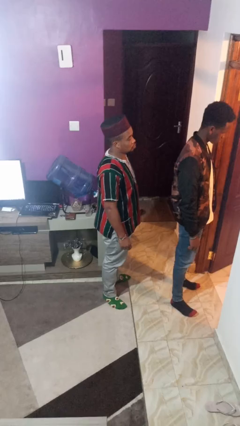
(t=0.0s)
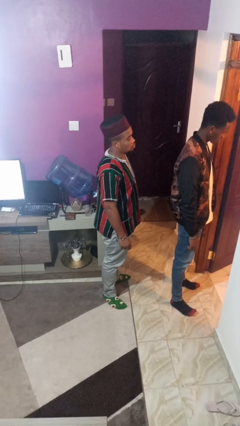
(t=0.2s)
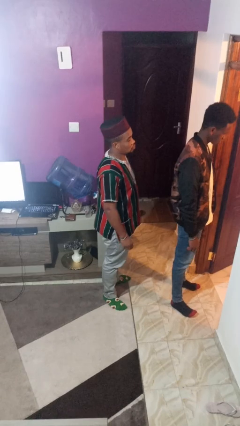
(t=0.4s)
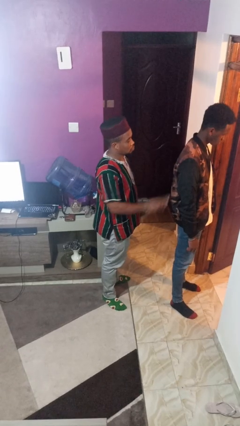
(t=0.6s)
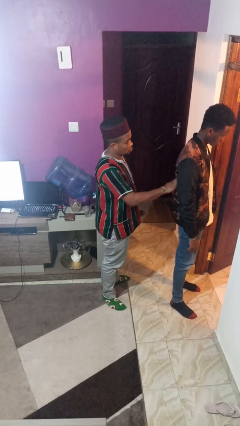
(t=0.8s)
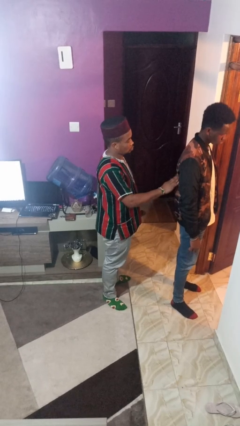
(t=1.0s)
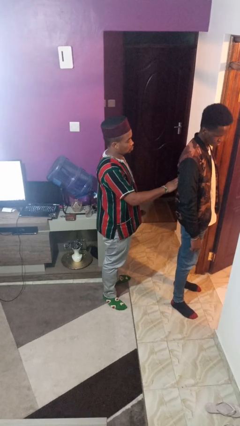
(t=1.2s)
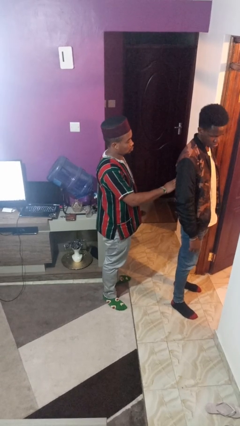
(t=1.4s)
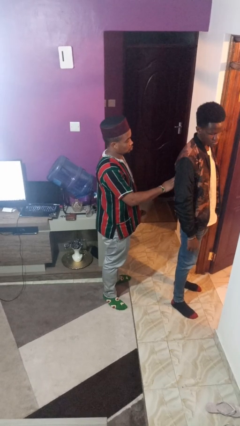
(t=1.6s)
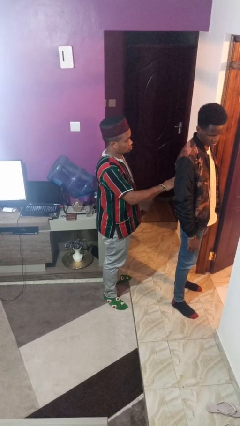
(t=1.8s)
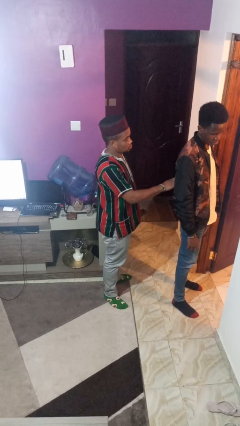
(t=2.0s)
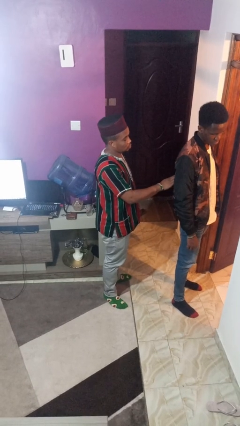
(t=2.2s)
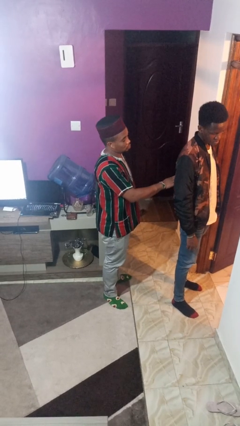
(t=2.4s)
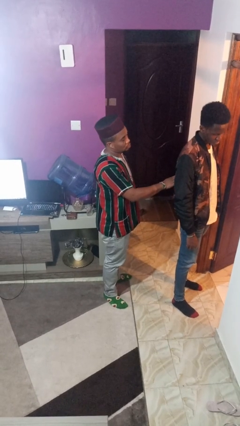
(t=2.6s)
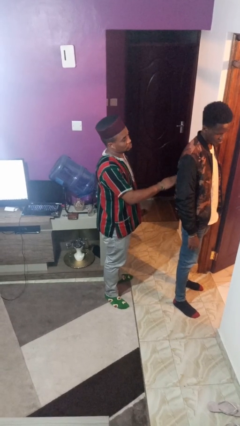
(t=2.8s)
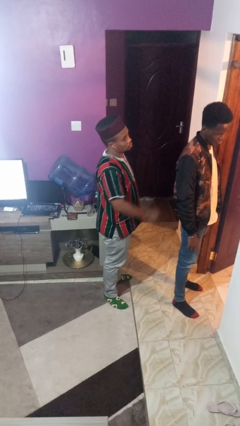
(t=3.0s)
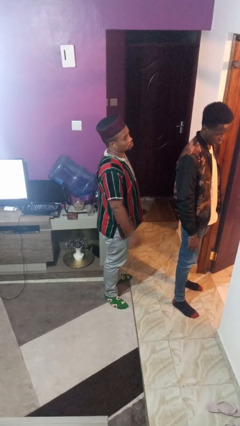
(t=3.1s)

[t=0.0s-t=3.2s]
person touches back of person

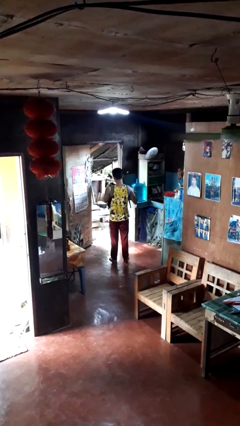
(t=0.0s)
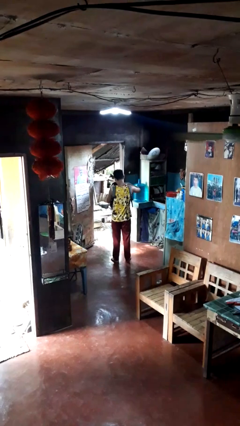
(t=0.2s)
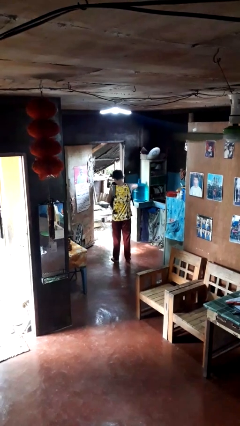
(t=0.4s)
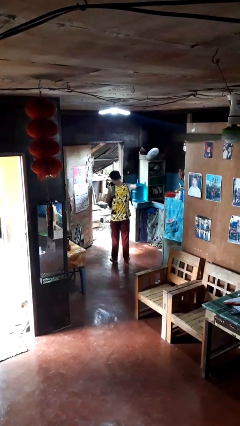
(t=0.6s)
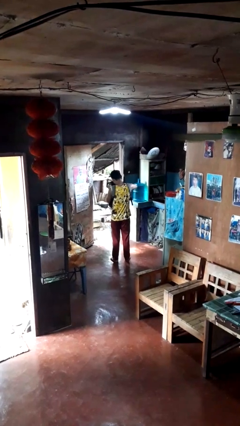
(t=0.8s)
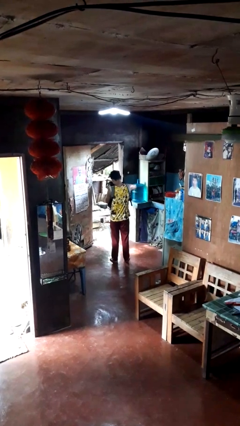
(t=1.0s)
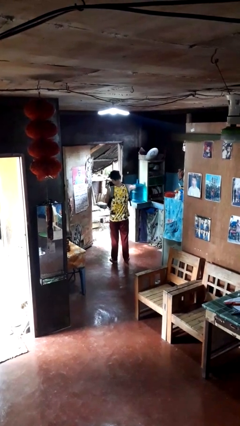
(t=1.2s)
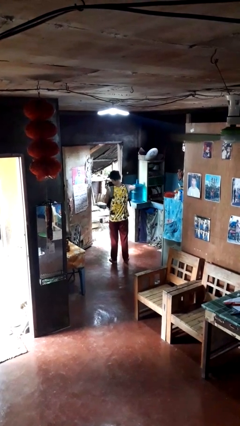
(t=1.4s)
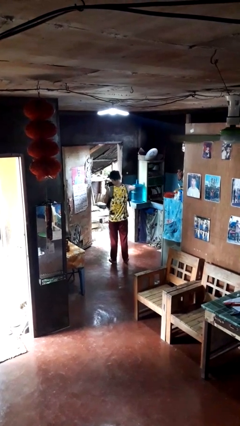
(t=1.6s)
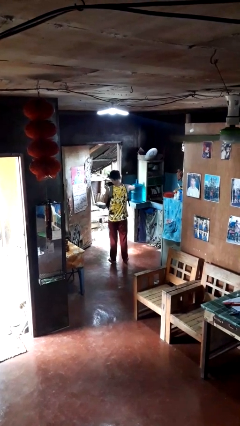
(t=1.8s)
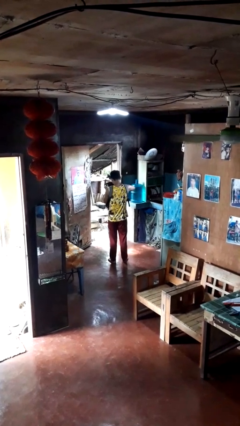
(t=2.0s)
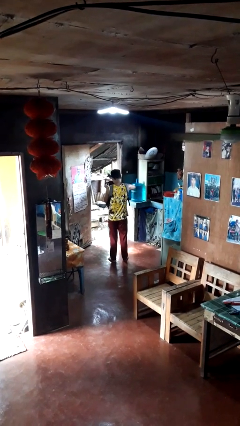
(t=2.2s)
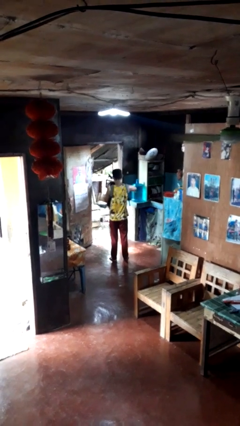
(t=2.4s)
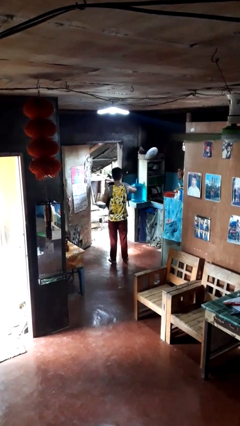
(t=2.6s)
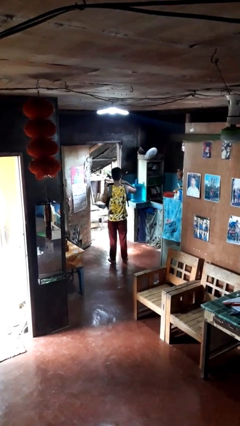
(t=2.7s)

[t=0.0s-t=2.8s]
person searches in backpack

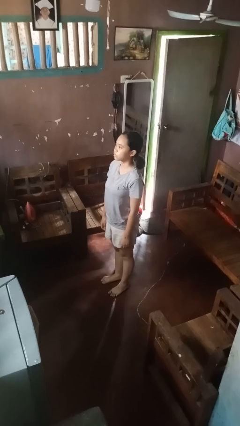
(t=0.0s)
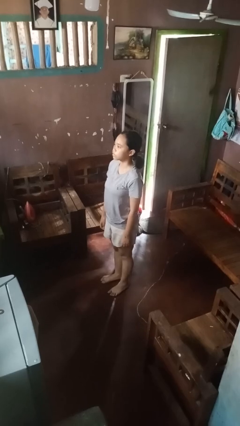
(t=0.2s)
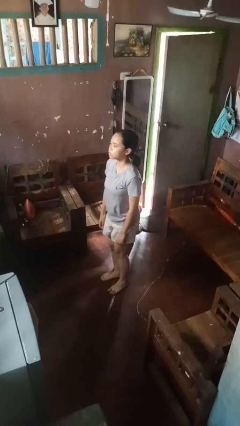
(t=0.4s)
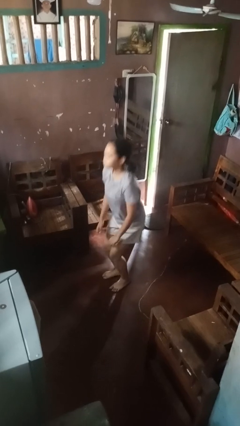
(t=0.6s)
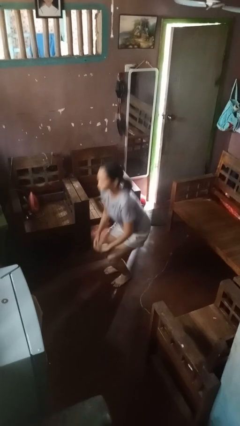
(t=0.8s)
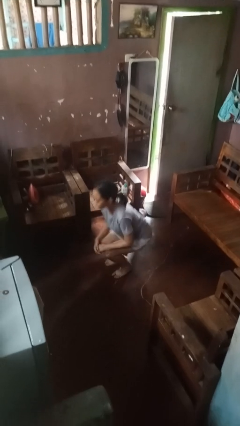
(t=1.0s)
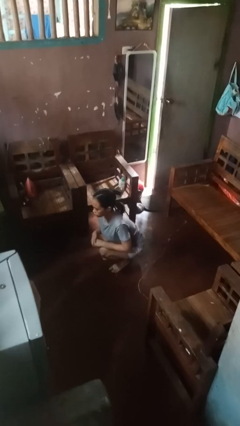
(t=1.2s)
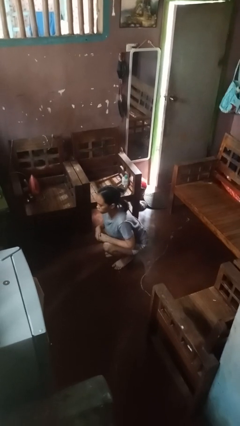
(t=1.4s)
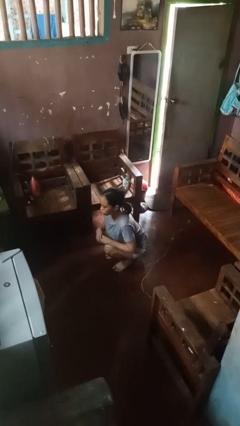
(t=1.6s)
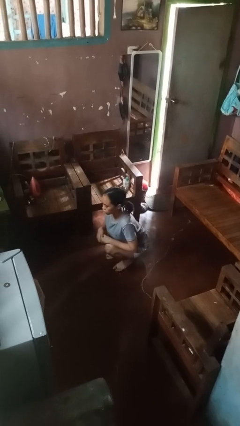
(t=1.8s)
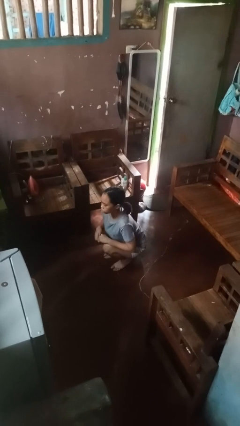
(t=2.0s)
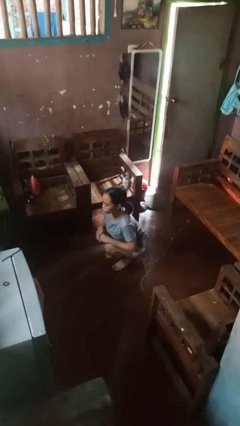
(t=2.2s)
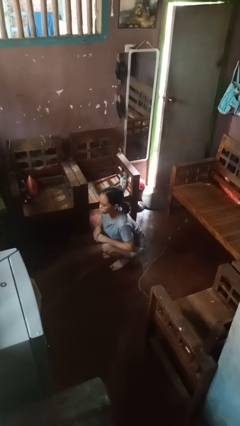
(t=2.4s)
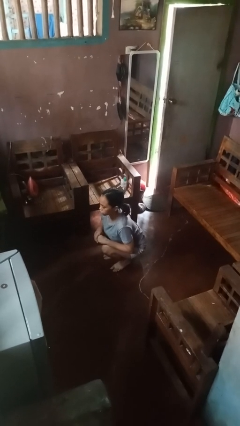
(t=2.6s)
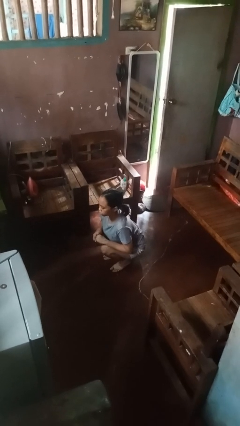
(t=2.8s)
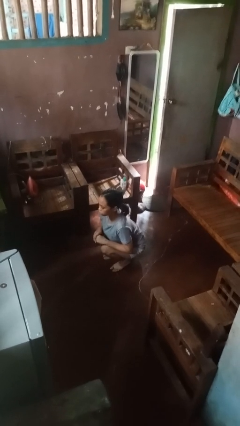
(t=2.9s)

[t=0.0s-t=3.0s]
person squats

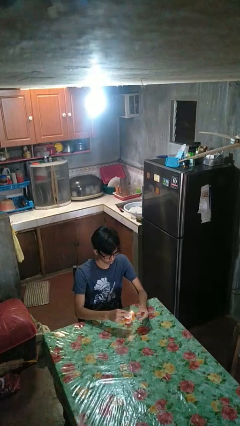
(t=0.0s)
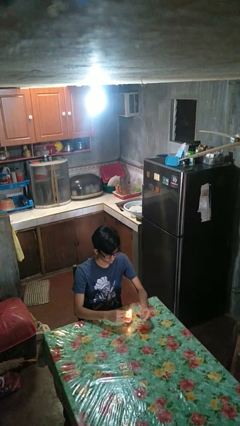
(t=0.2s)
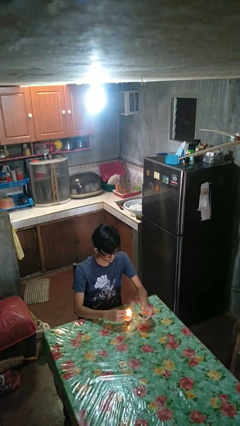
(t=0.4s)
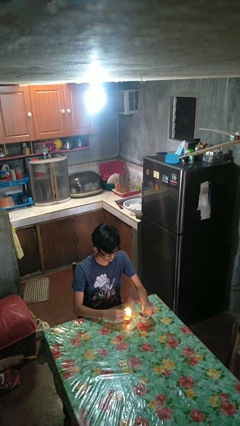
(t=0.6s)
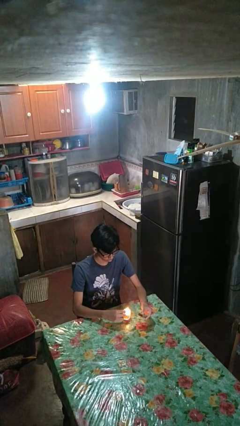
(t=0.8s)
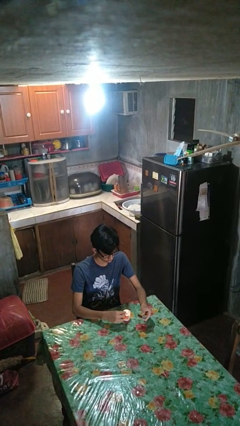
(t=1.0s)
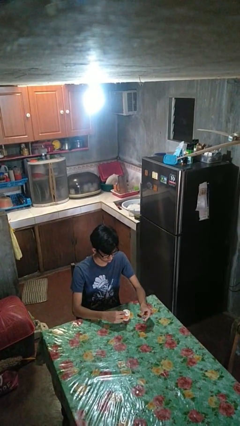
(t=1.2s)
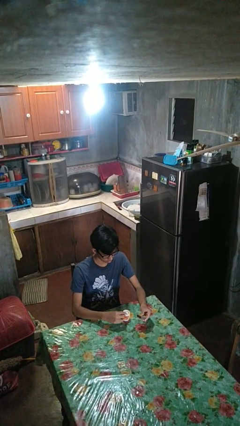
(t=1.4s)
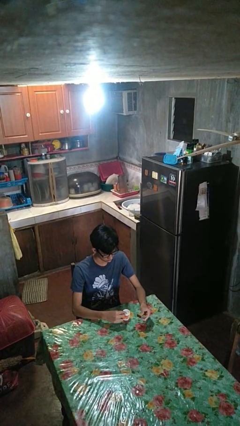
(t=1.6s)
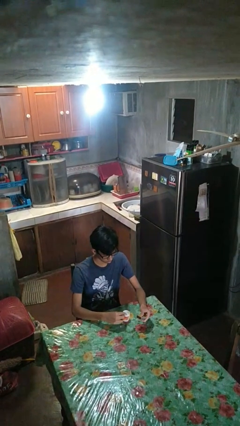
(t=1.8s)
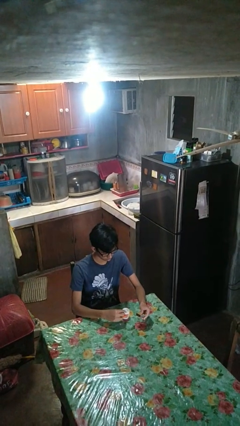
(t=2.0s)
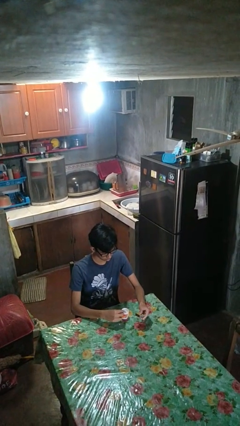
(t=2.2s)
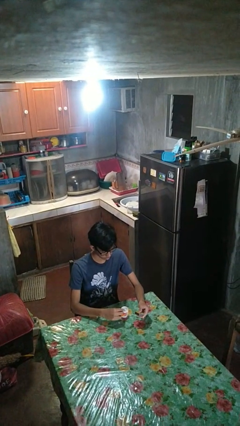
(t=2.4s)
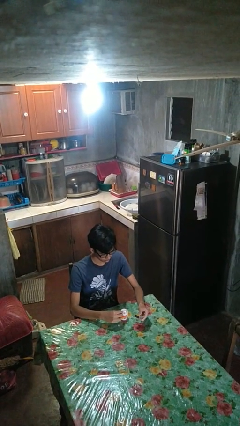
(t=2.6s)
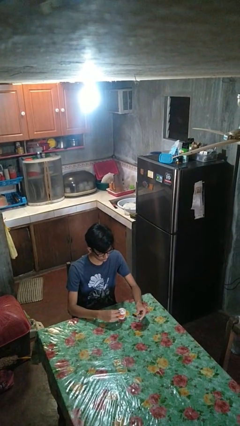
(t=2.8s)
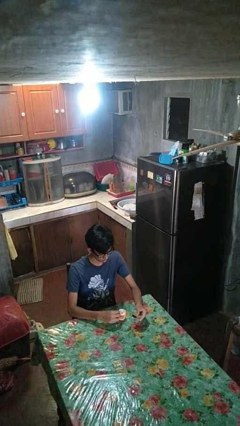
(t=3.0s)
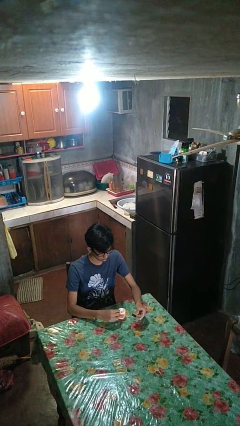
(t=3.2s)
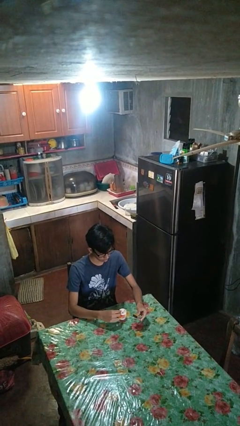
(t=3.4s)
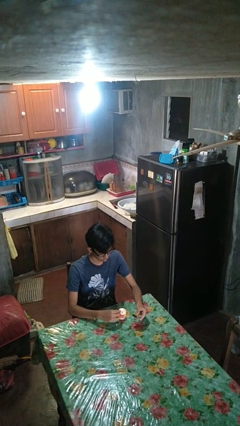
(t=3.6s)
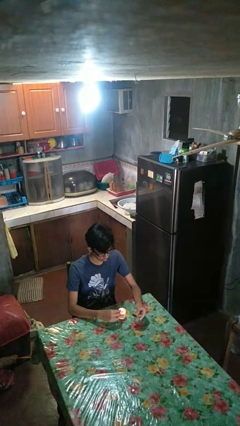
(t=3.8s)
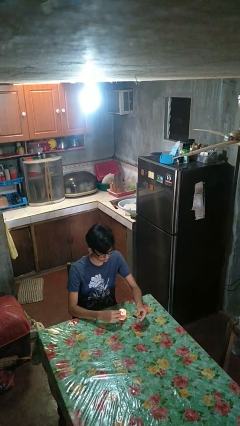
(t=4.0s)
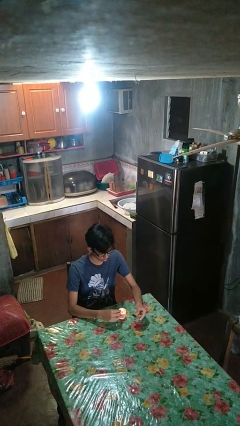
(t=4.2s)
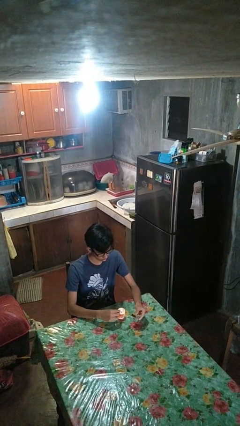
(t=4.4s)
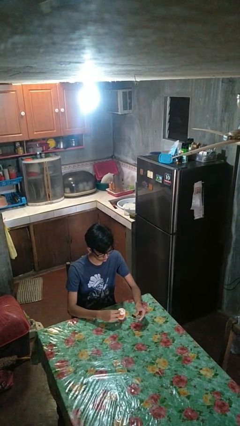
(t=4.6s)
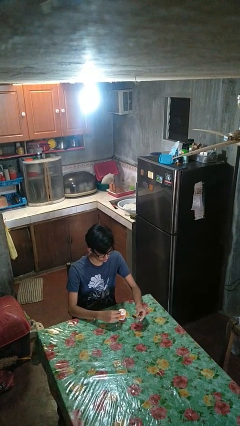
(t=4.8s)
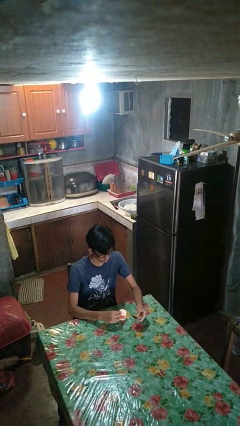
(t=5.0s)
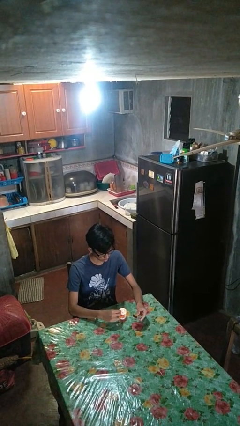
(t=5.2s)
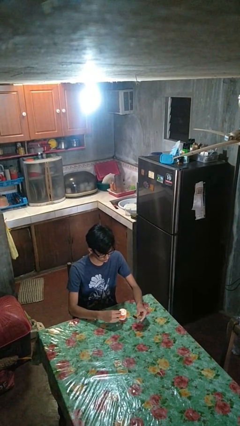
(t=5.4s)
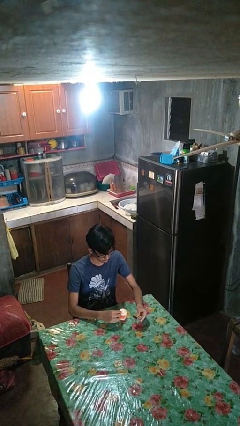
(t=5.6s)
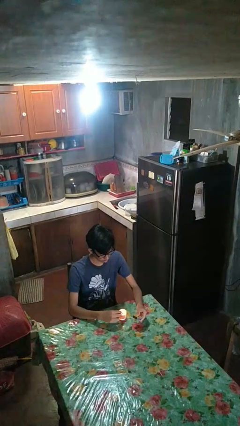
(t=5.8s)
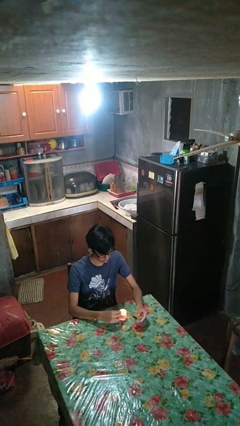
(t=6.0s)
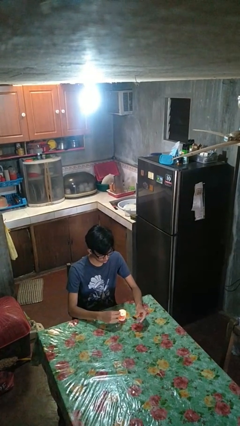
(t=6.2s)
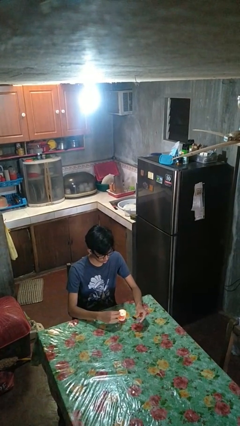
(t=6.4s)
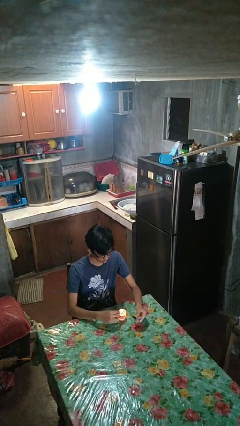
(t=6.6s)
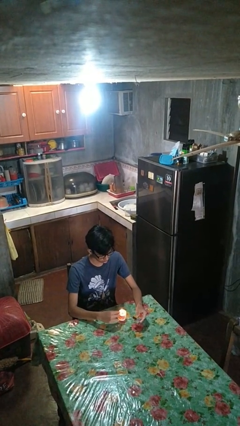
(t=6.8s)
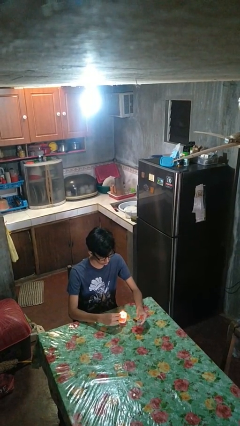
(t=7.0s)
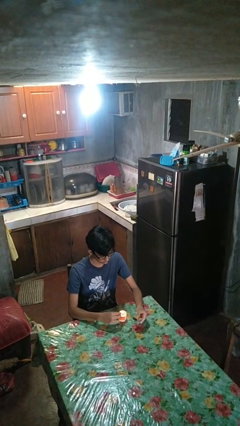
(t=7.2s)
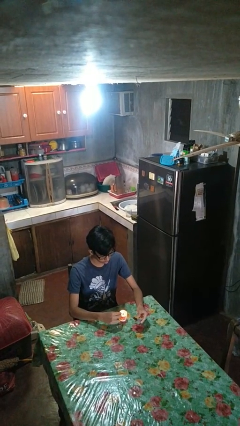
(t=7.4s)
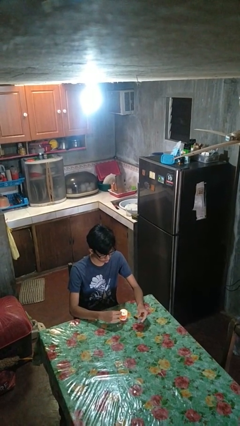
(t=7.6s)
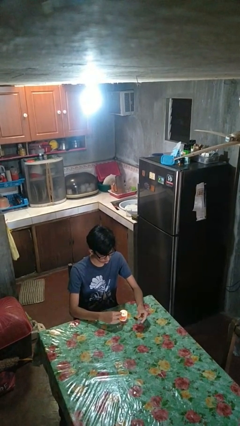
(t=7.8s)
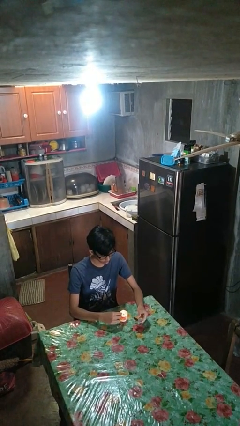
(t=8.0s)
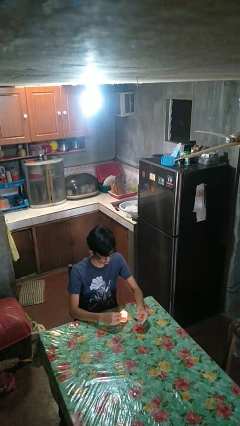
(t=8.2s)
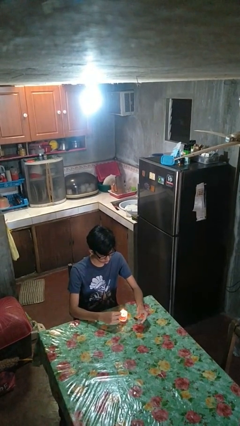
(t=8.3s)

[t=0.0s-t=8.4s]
person lights candle

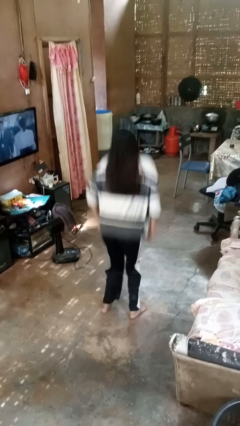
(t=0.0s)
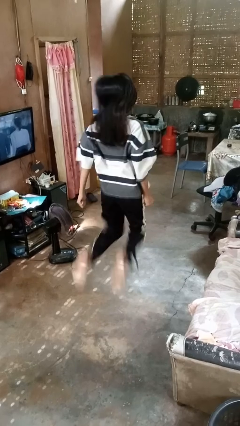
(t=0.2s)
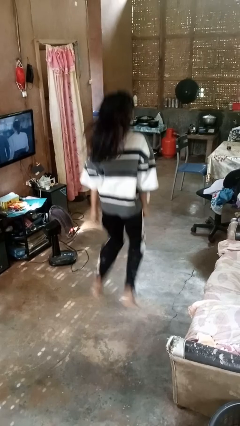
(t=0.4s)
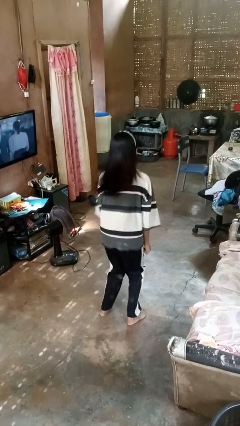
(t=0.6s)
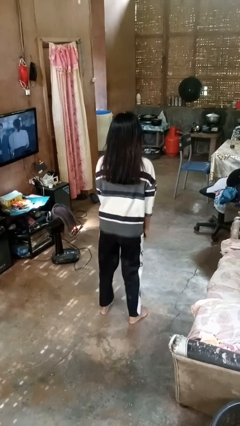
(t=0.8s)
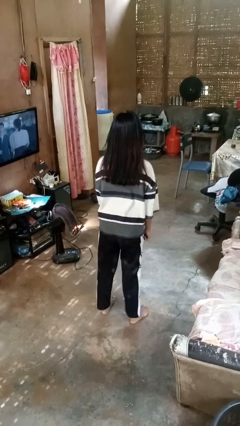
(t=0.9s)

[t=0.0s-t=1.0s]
person jumps
